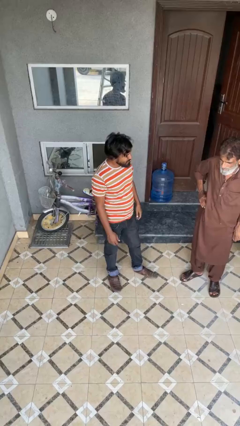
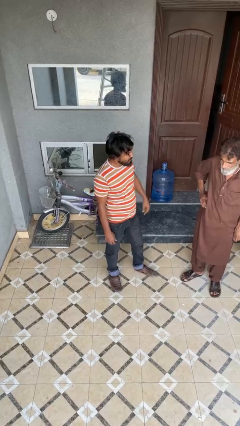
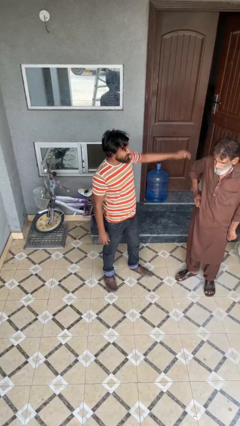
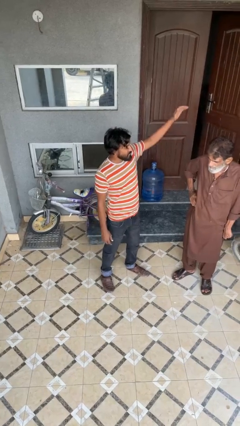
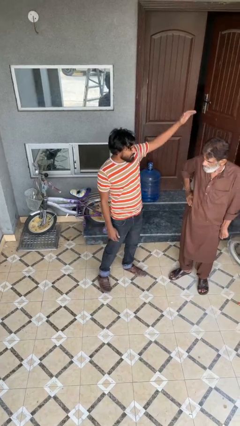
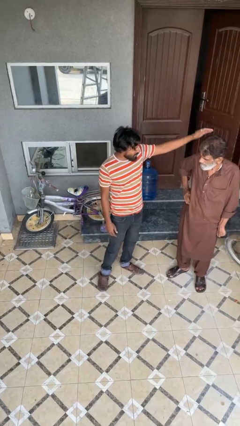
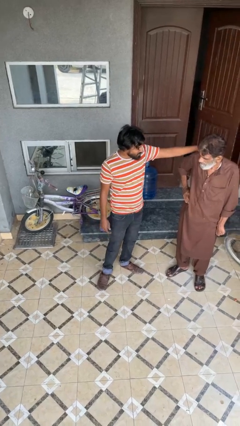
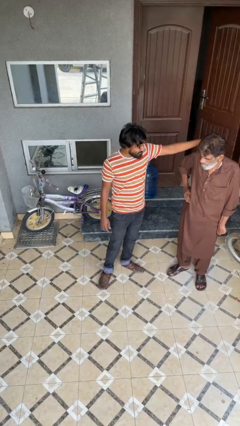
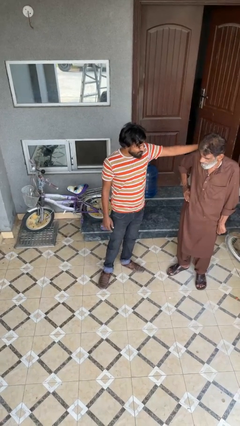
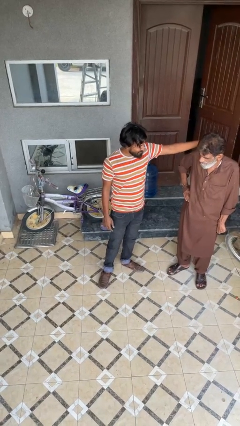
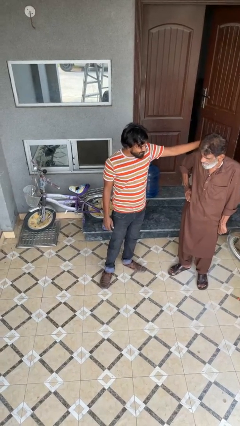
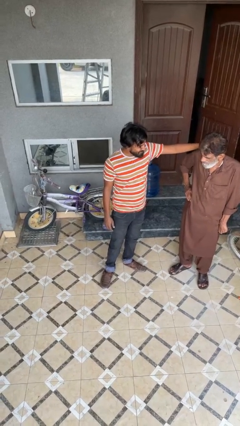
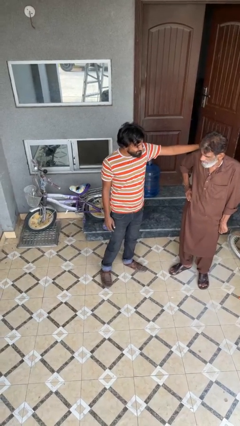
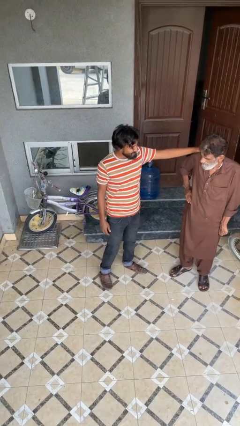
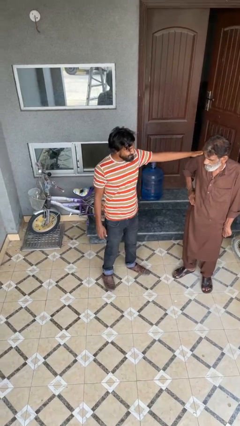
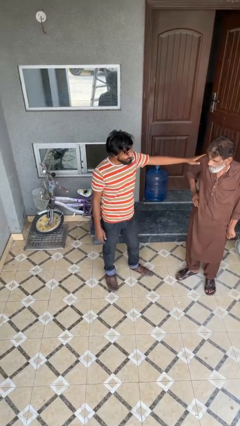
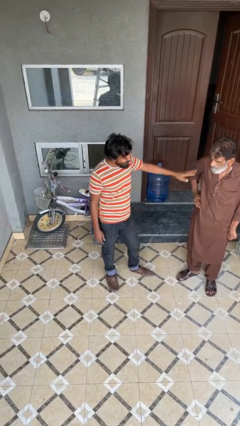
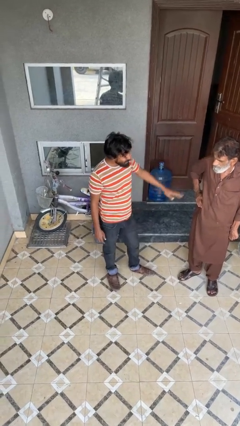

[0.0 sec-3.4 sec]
person pounds shoulders of person

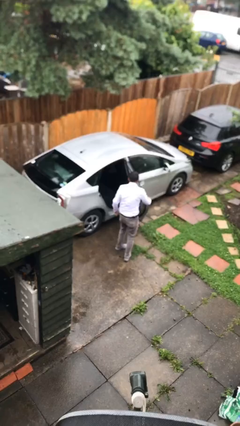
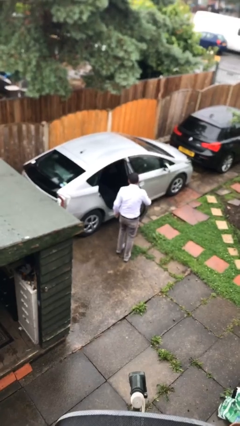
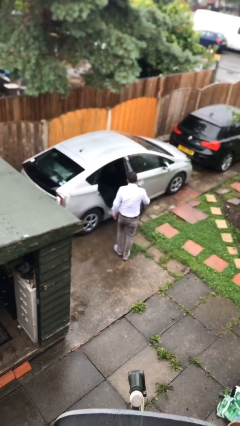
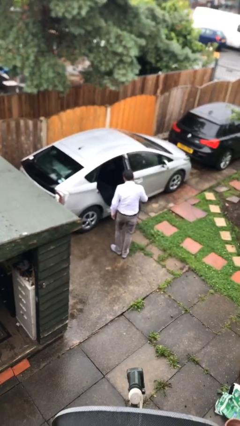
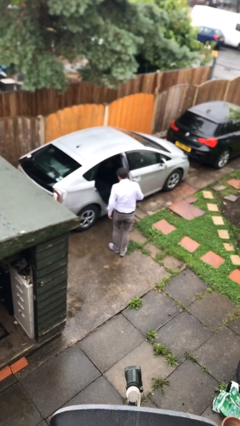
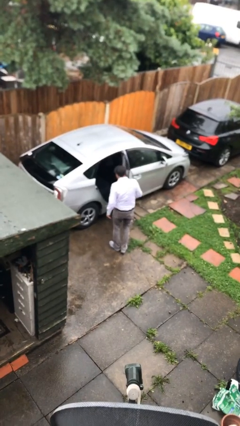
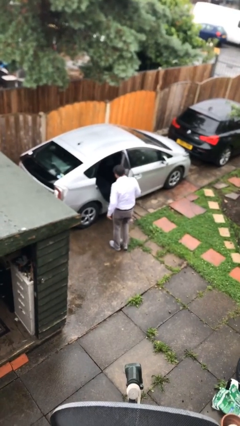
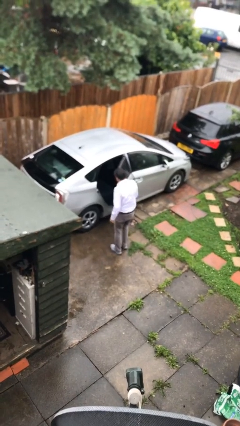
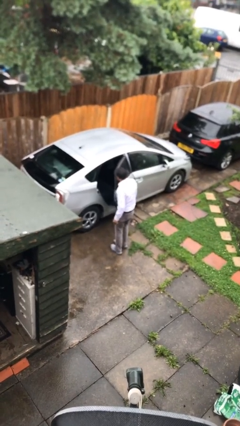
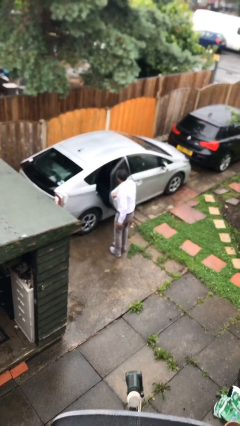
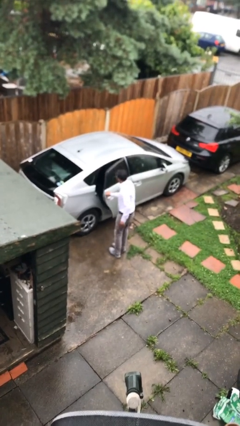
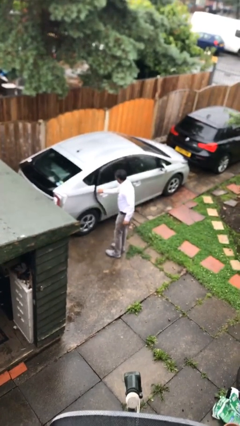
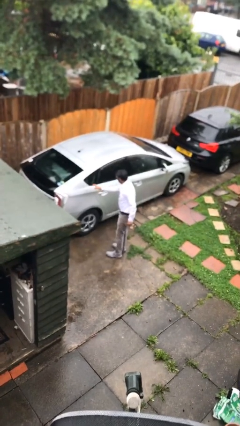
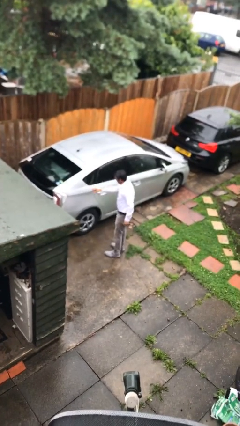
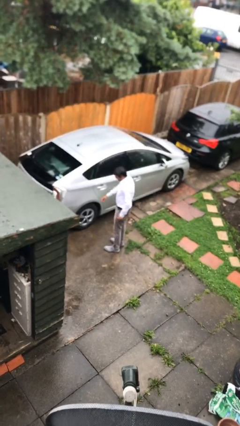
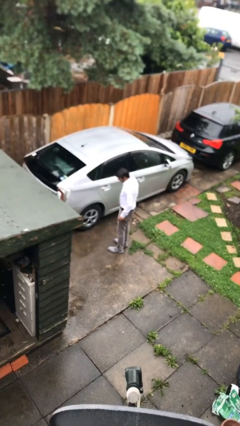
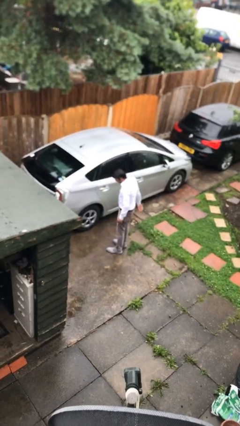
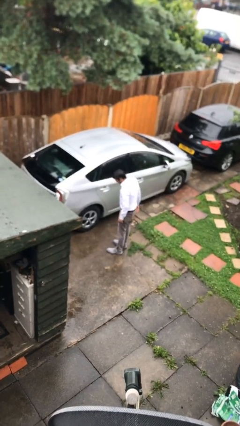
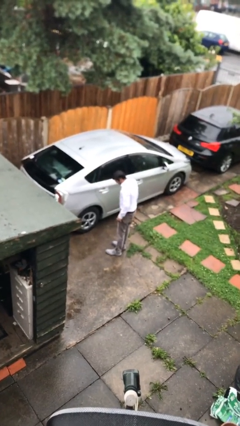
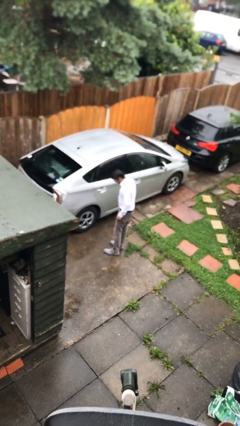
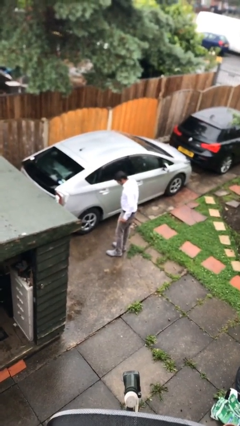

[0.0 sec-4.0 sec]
person closes car door

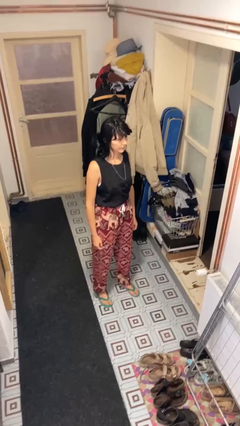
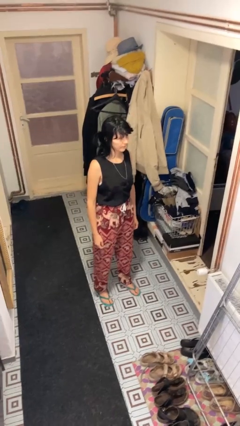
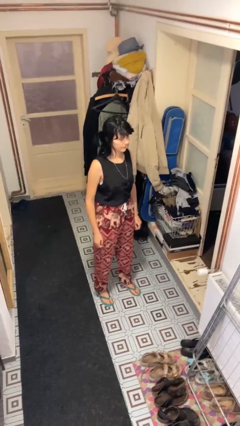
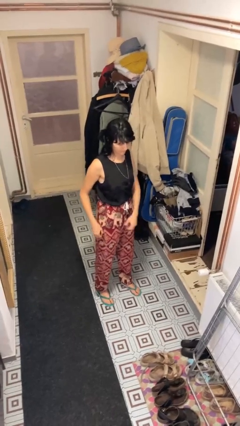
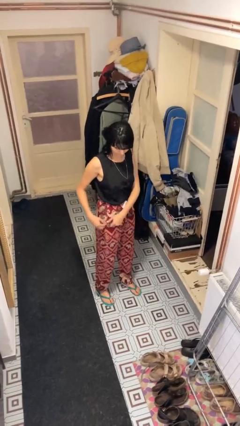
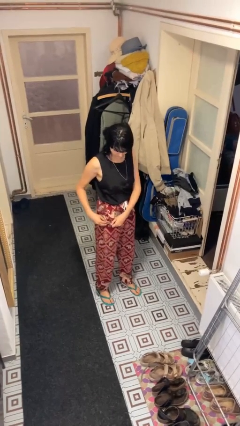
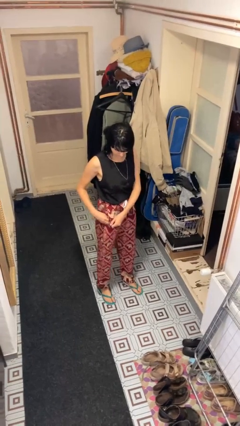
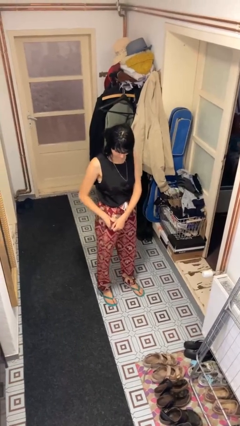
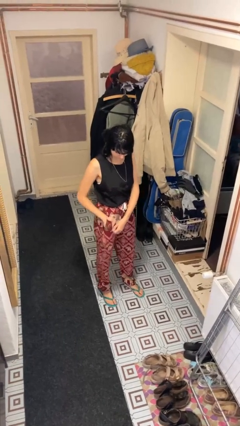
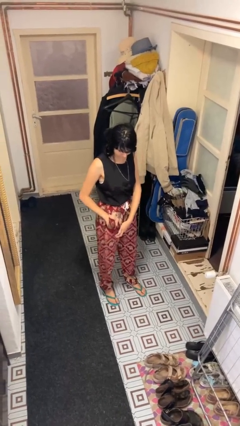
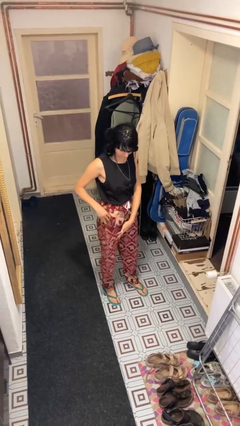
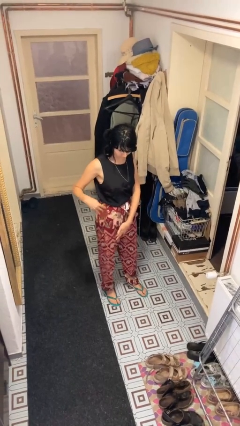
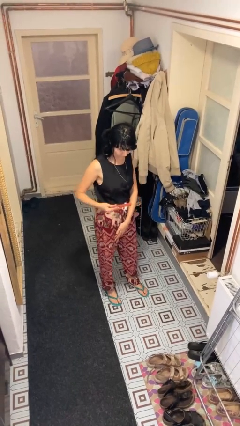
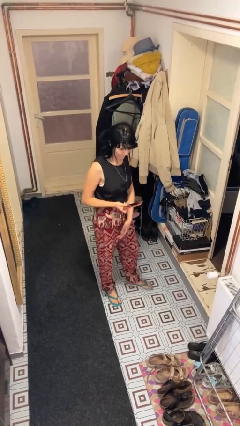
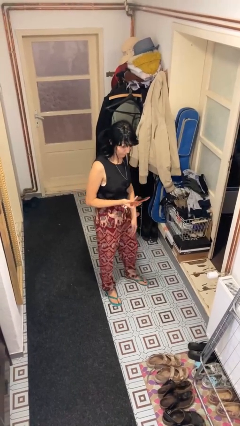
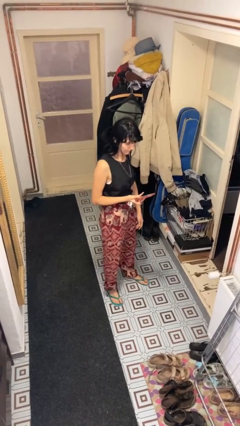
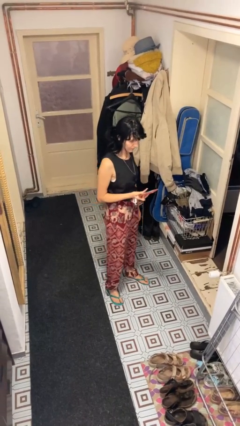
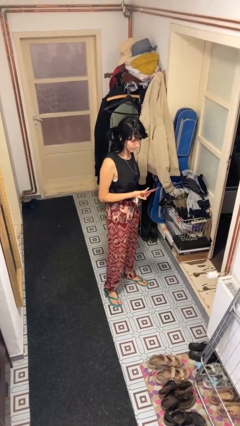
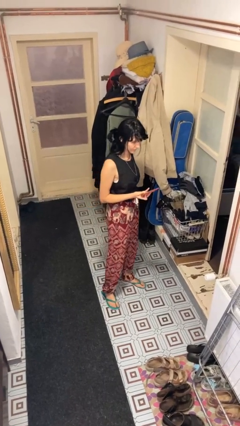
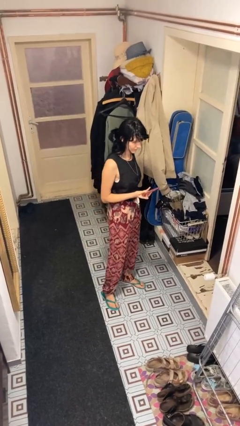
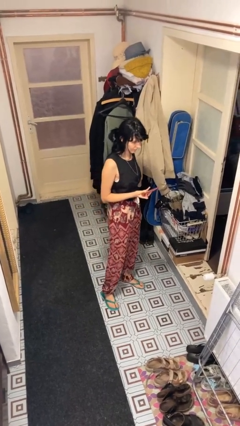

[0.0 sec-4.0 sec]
person takes phone from pocket

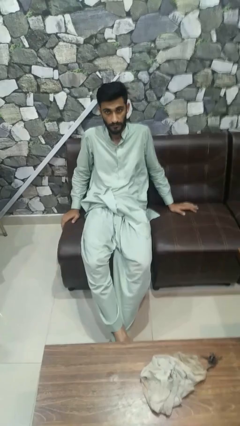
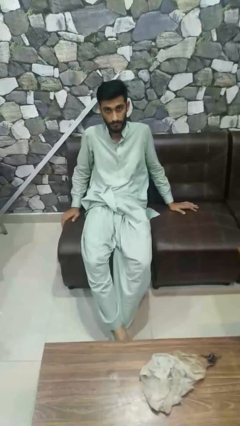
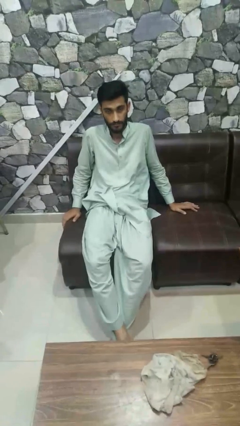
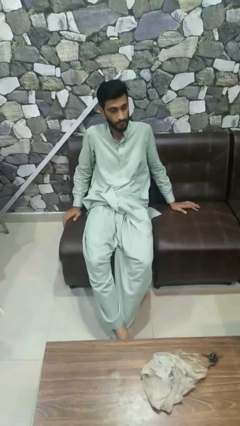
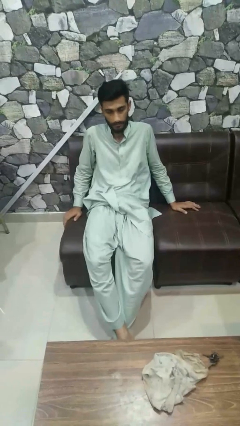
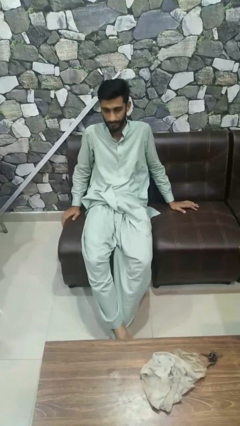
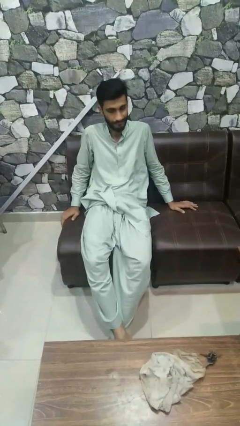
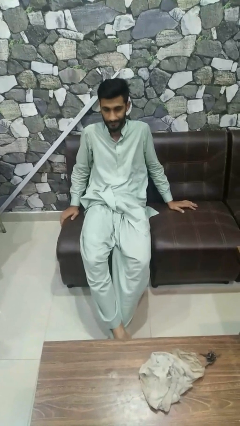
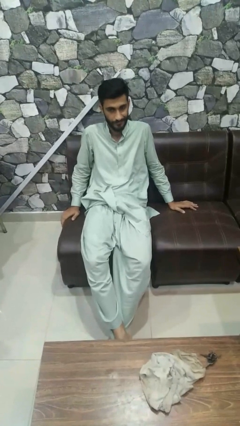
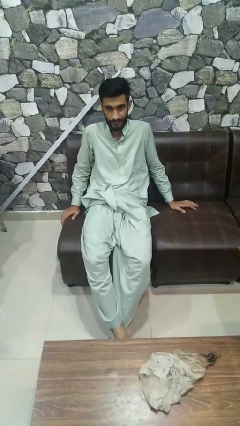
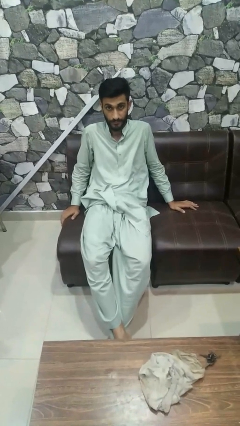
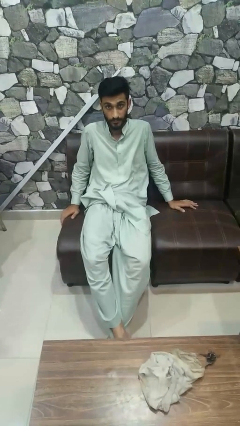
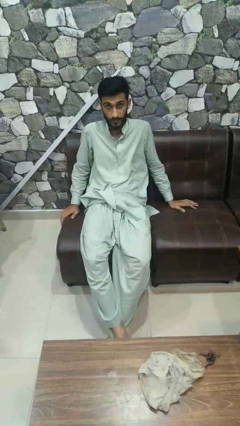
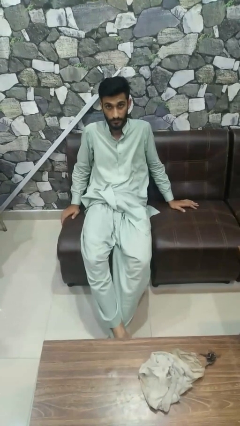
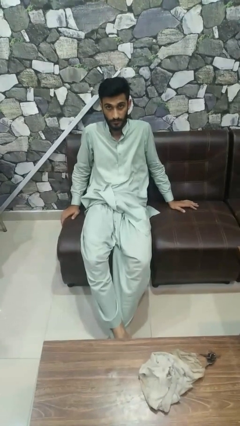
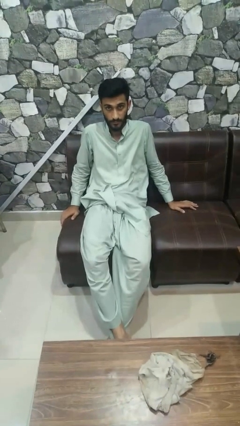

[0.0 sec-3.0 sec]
person shakes head

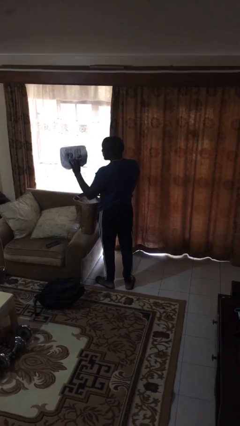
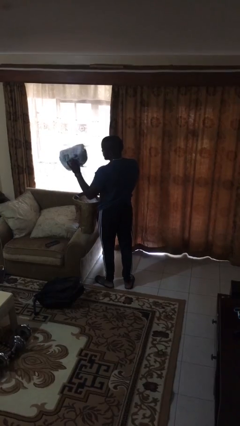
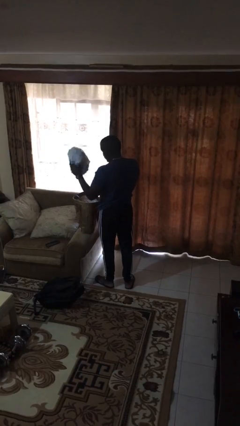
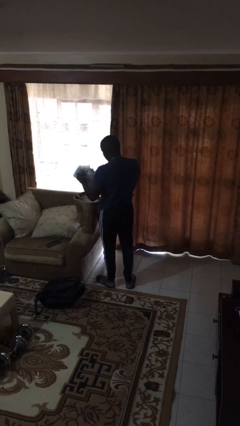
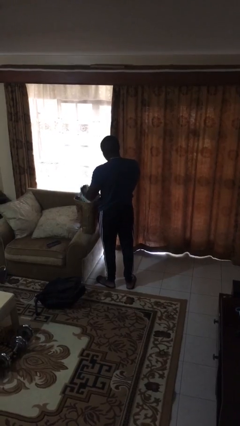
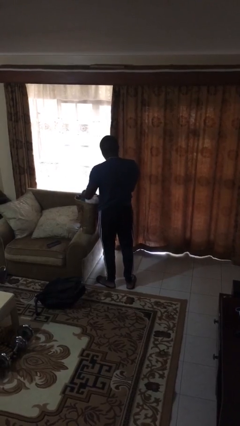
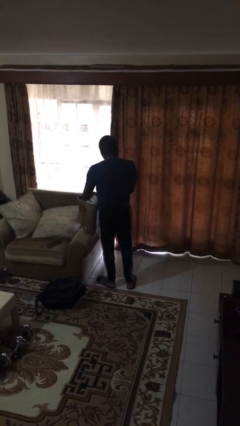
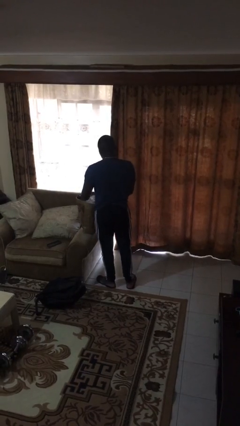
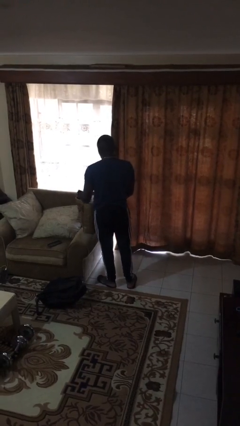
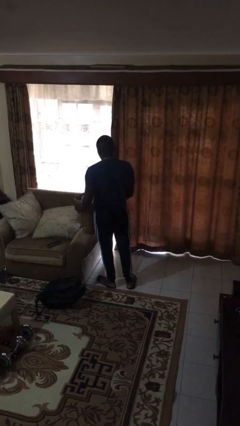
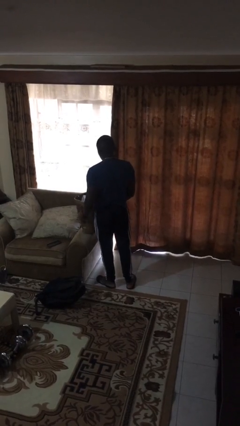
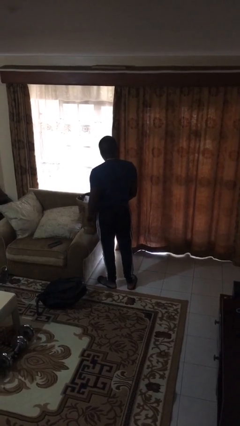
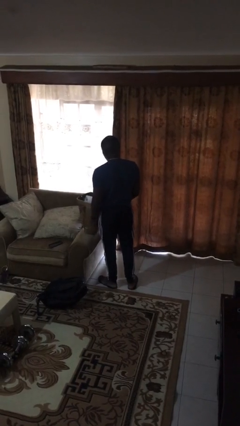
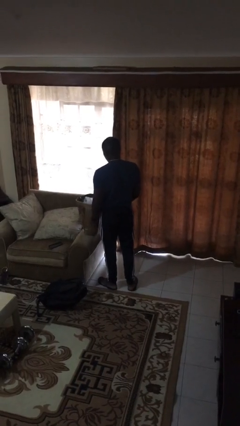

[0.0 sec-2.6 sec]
person puts object into bag

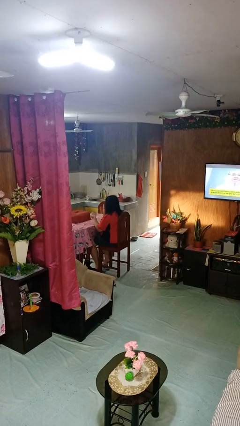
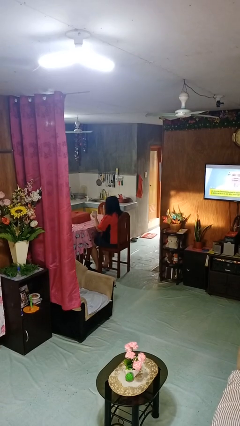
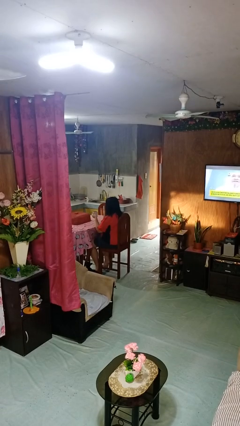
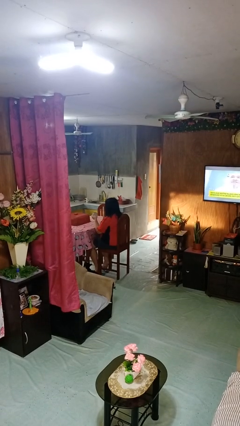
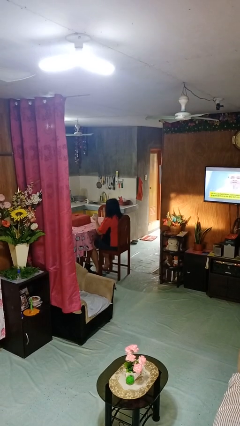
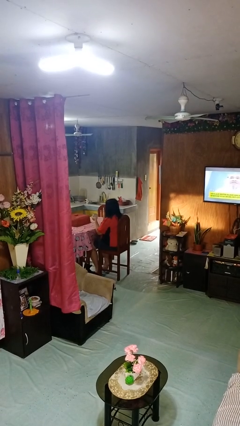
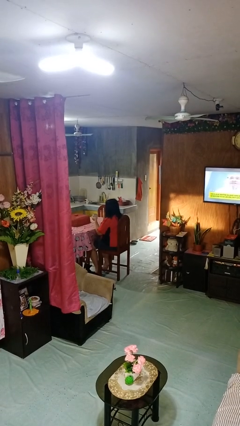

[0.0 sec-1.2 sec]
person picks up object from table
